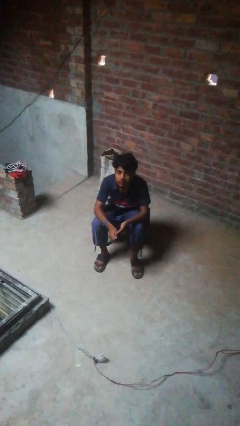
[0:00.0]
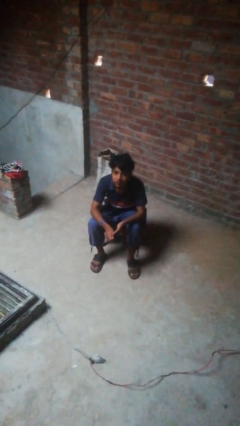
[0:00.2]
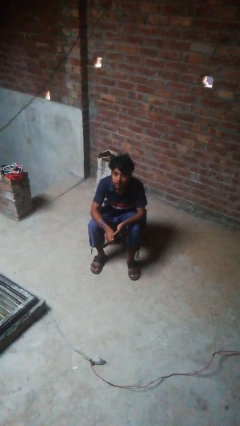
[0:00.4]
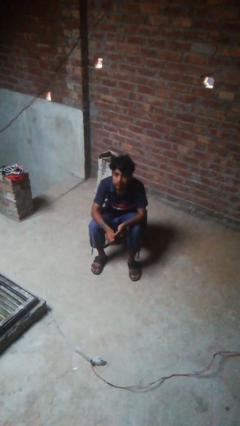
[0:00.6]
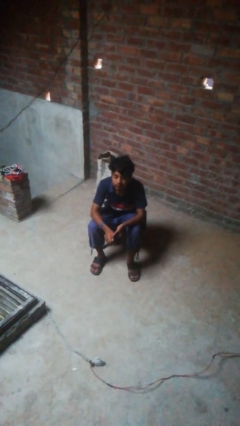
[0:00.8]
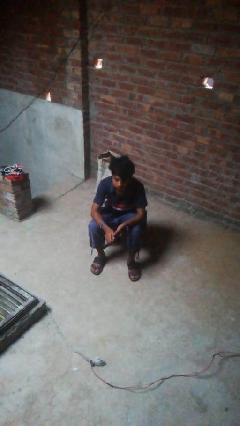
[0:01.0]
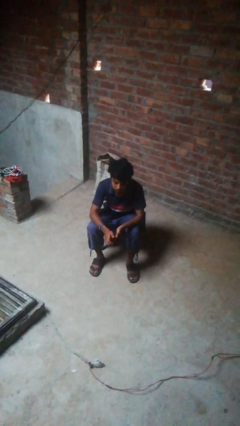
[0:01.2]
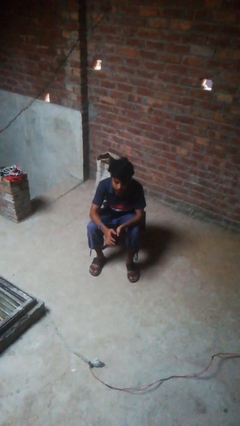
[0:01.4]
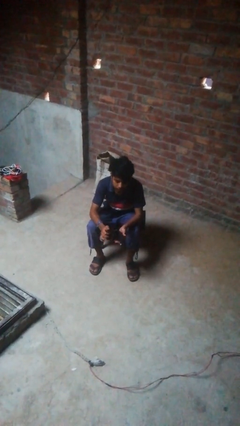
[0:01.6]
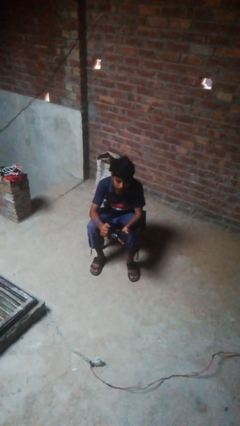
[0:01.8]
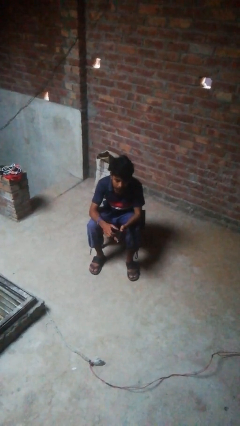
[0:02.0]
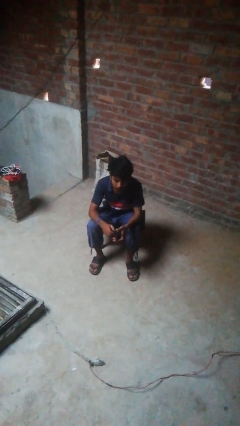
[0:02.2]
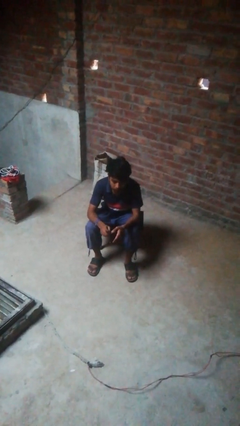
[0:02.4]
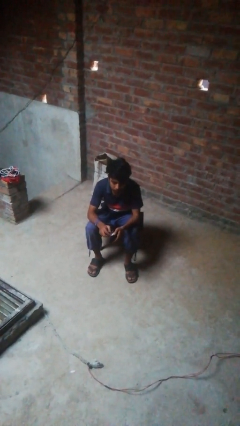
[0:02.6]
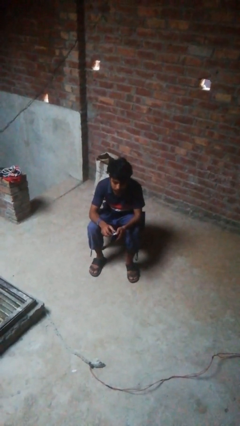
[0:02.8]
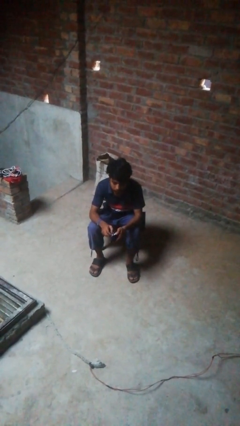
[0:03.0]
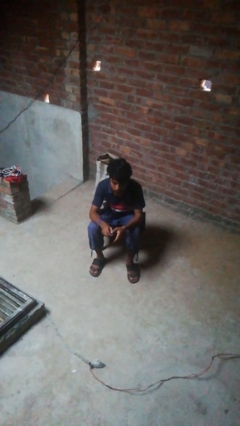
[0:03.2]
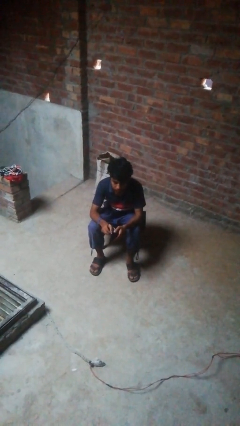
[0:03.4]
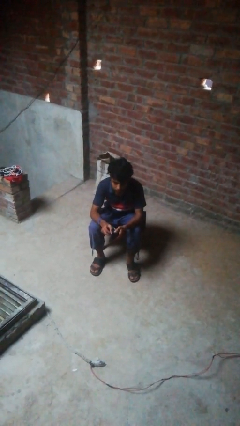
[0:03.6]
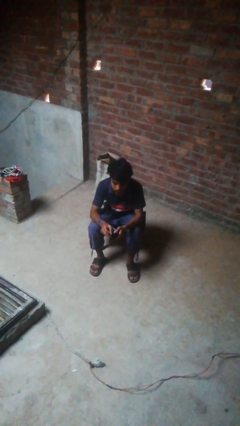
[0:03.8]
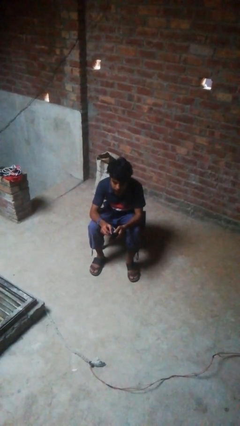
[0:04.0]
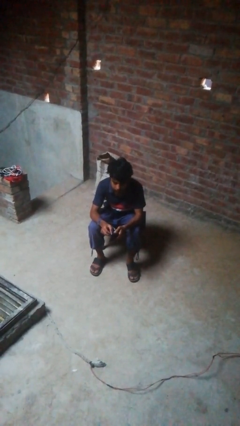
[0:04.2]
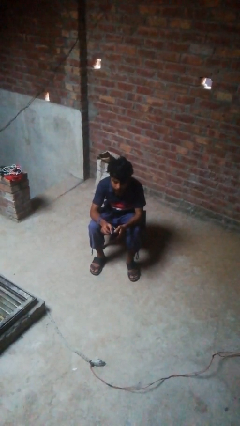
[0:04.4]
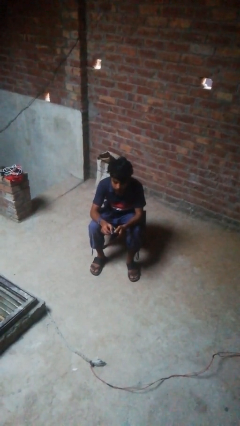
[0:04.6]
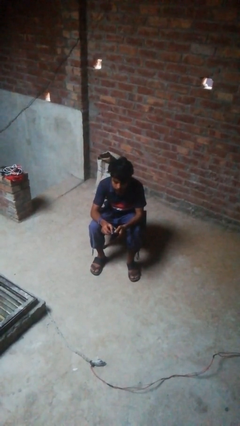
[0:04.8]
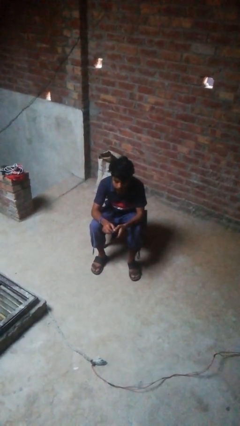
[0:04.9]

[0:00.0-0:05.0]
person searches in purse

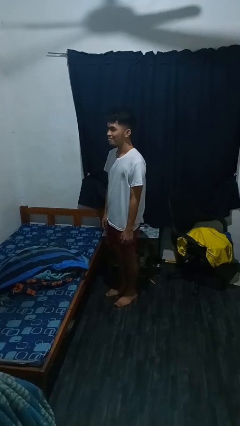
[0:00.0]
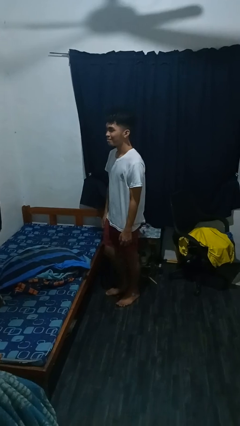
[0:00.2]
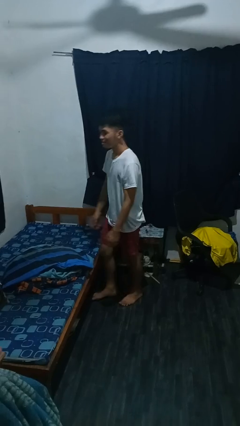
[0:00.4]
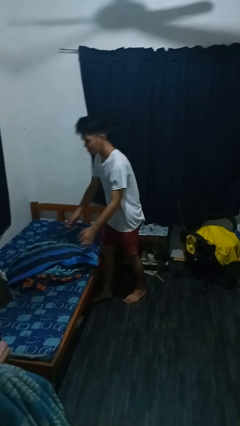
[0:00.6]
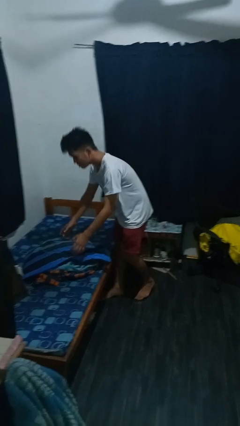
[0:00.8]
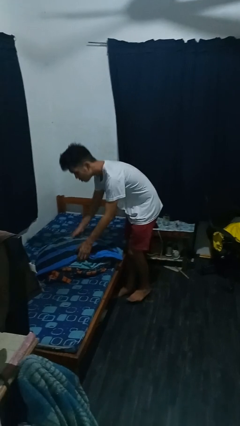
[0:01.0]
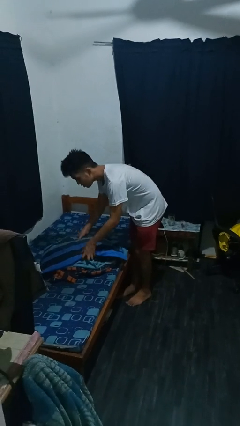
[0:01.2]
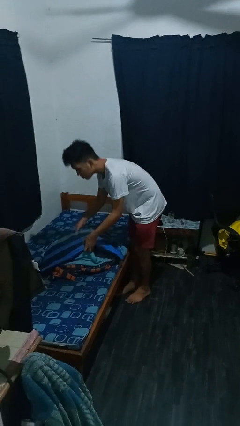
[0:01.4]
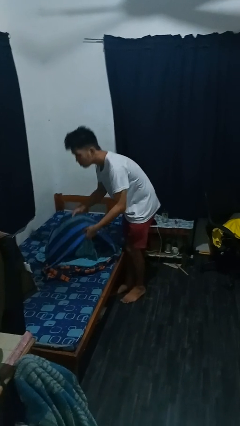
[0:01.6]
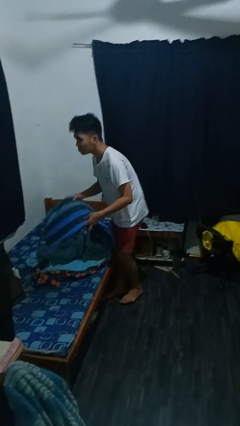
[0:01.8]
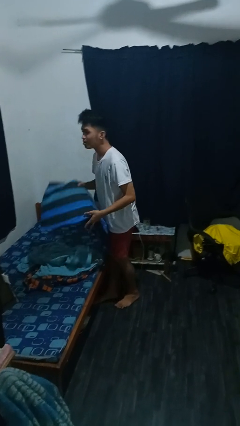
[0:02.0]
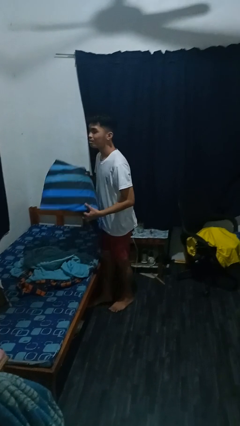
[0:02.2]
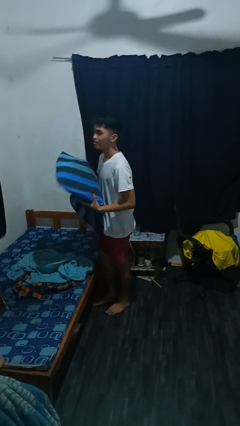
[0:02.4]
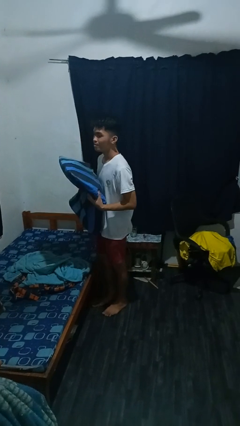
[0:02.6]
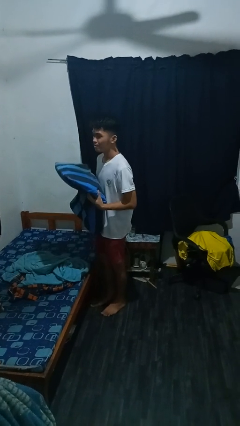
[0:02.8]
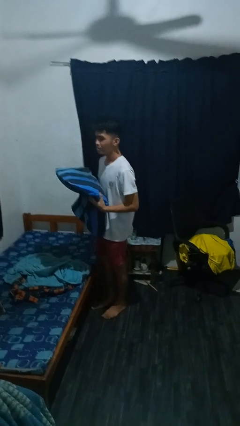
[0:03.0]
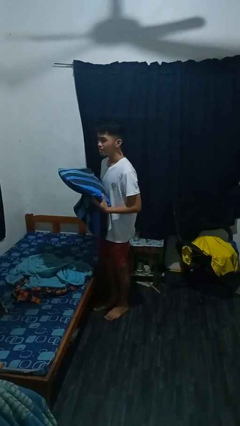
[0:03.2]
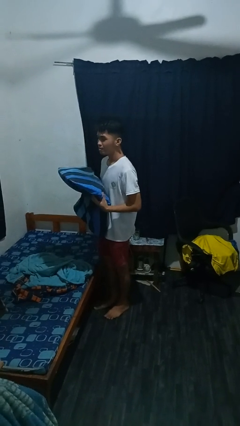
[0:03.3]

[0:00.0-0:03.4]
person picks up object from bed

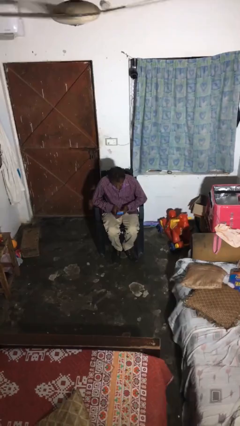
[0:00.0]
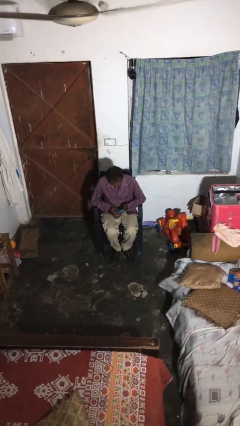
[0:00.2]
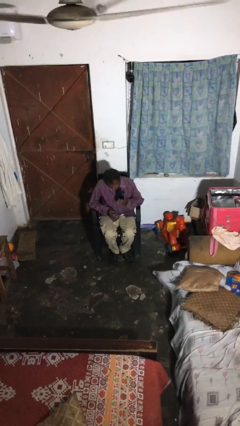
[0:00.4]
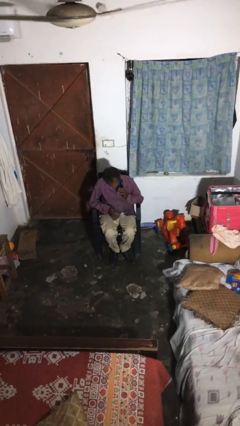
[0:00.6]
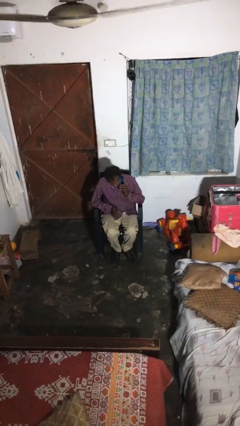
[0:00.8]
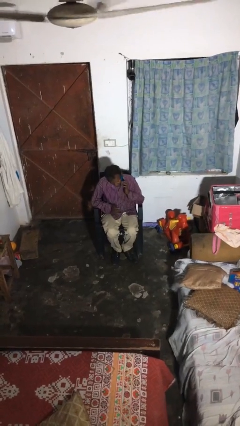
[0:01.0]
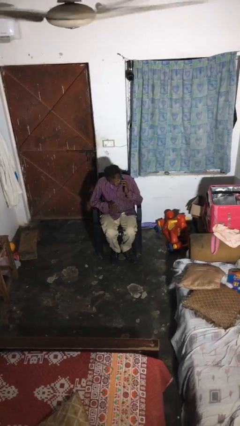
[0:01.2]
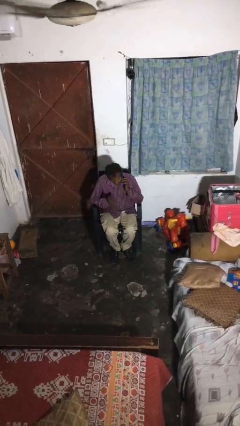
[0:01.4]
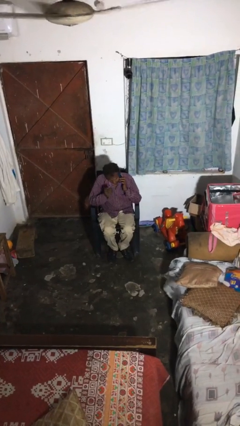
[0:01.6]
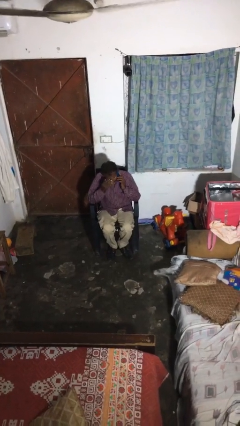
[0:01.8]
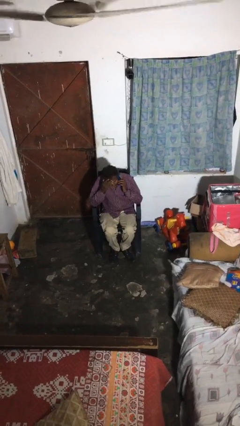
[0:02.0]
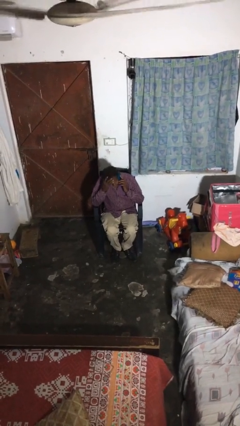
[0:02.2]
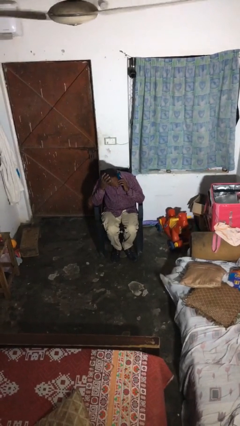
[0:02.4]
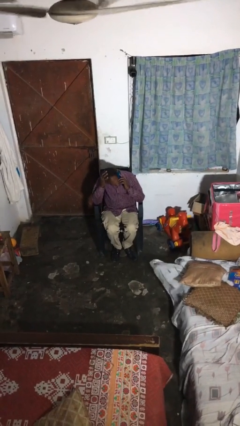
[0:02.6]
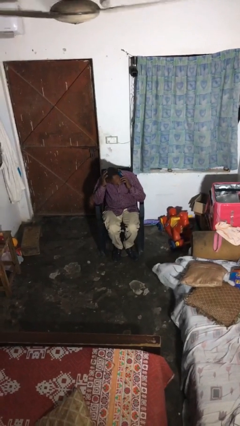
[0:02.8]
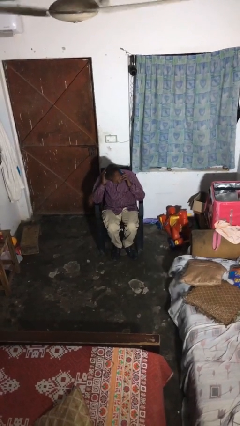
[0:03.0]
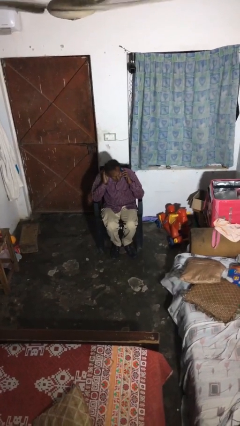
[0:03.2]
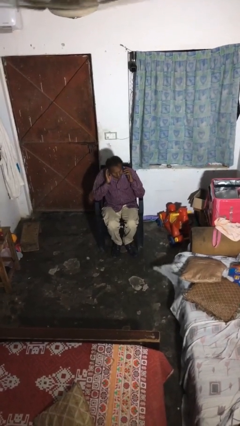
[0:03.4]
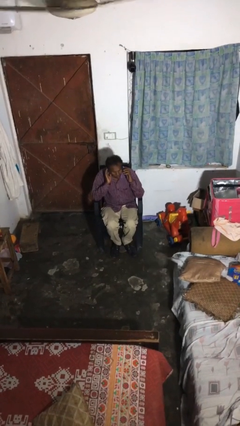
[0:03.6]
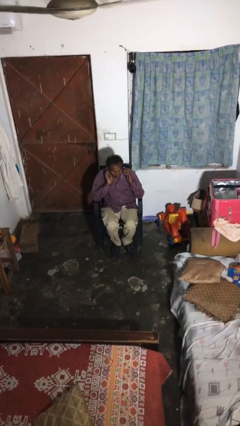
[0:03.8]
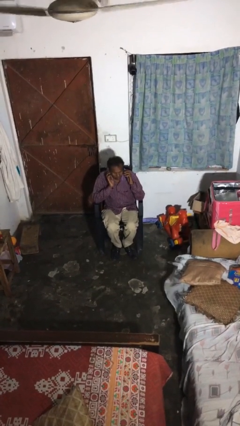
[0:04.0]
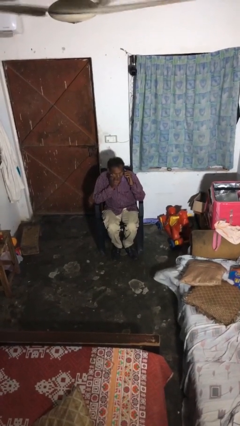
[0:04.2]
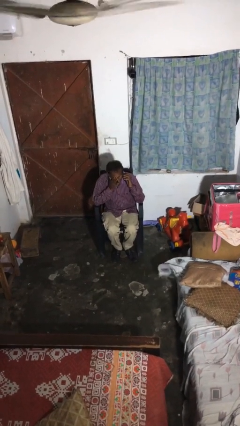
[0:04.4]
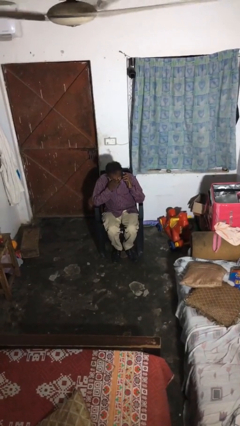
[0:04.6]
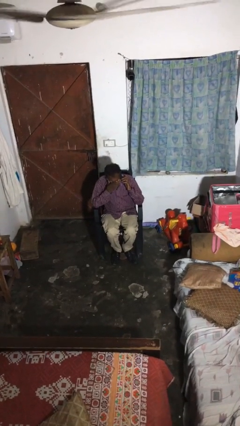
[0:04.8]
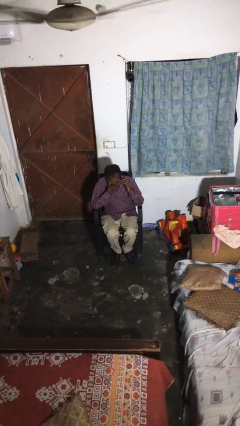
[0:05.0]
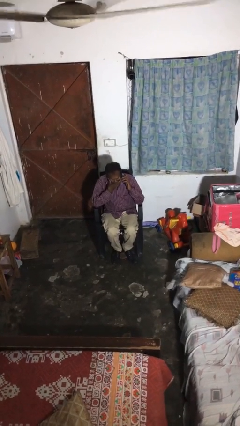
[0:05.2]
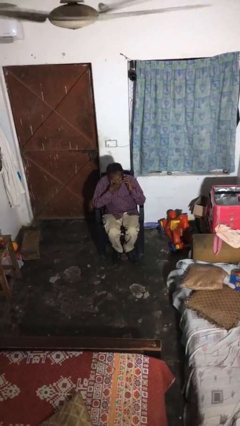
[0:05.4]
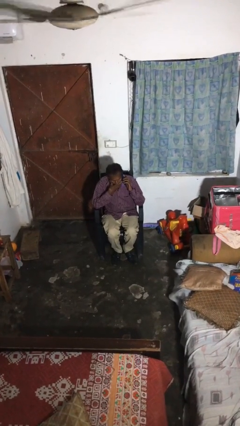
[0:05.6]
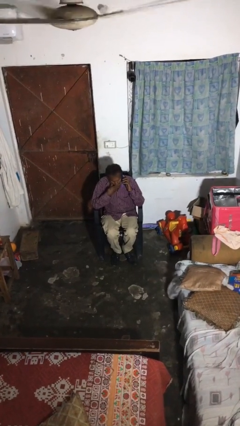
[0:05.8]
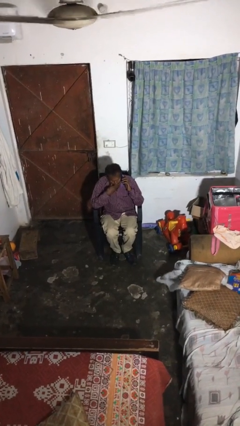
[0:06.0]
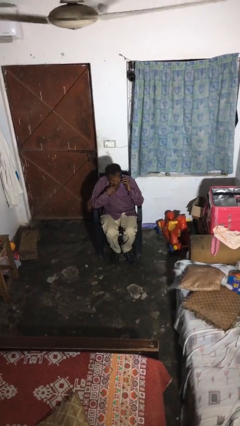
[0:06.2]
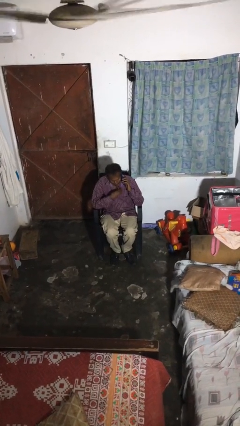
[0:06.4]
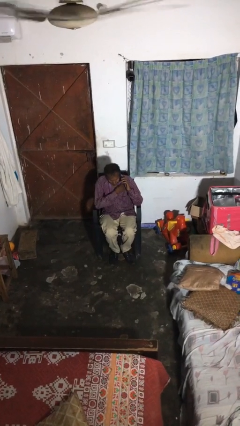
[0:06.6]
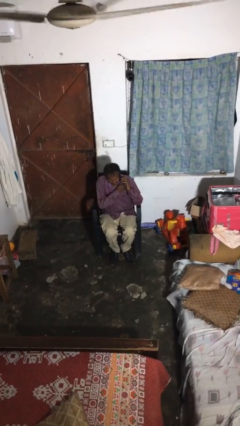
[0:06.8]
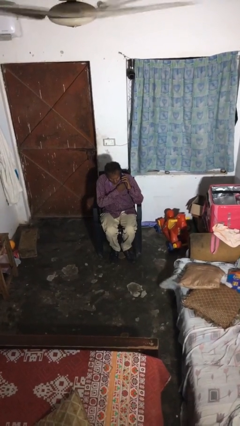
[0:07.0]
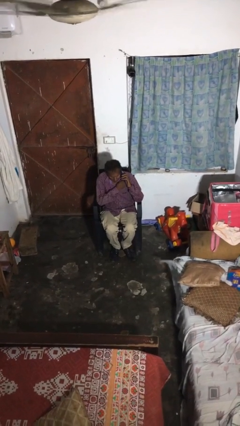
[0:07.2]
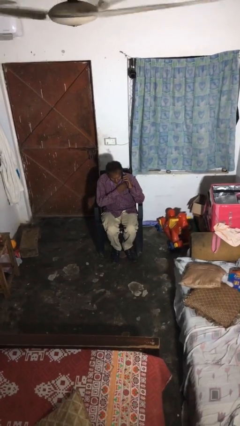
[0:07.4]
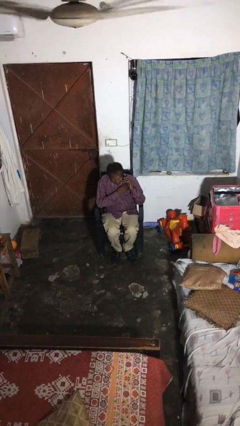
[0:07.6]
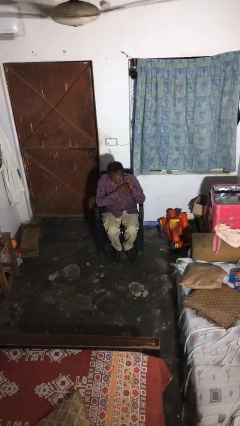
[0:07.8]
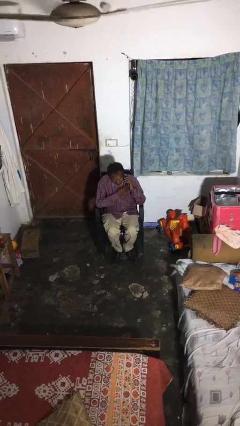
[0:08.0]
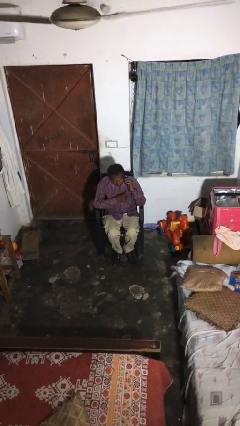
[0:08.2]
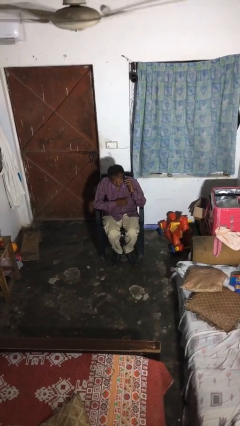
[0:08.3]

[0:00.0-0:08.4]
person talks on phone

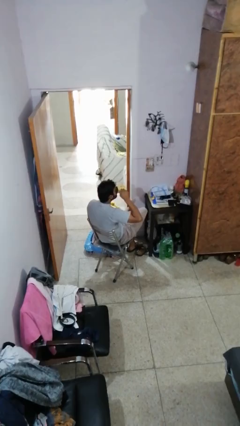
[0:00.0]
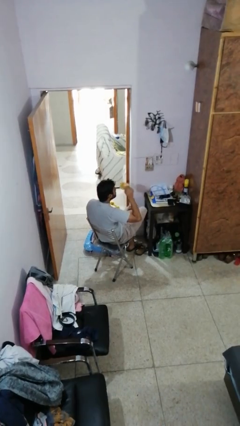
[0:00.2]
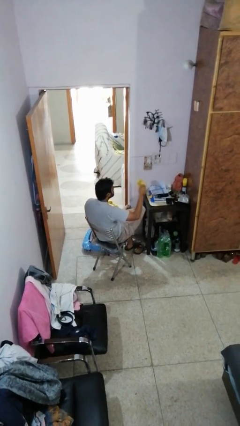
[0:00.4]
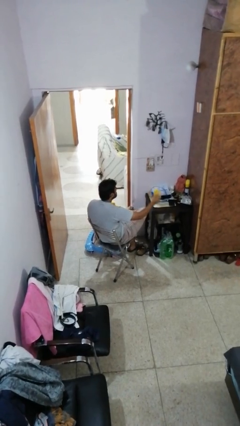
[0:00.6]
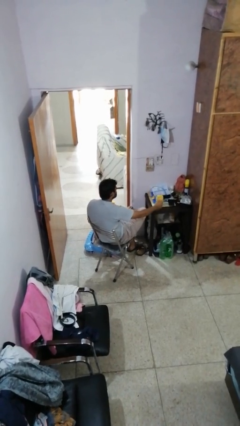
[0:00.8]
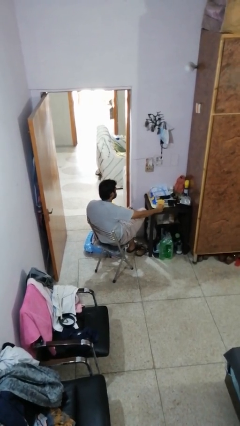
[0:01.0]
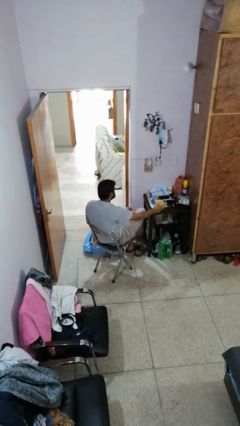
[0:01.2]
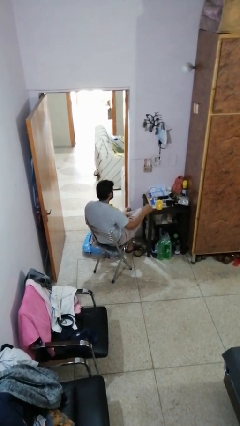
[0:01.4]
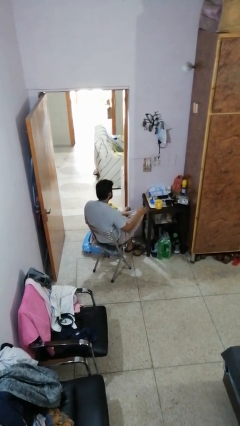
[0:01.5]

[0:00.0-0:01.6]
person puts down object on table
